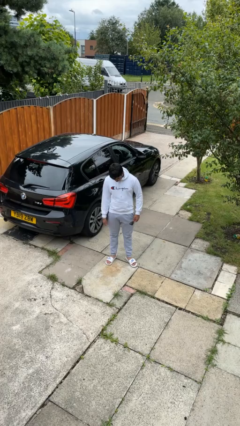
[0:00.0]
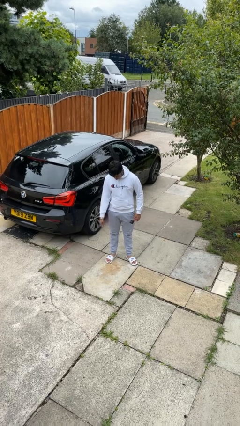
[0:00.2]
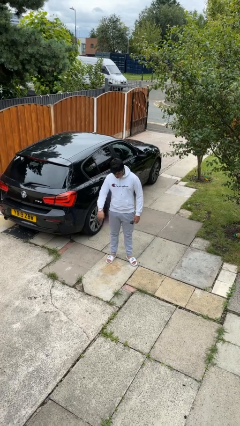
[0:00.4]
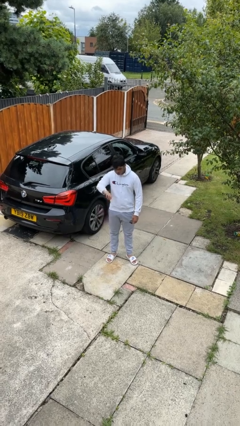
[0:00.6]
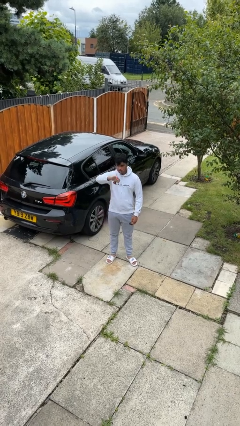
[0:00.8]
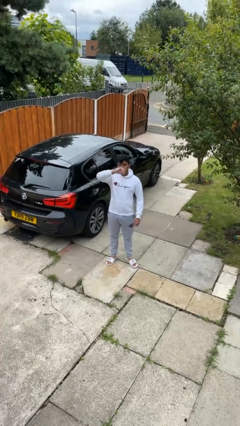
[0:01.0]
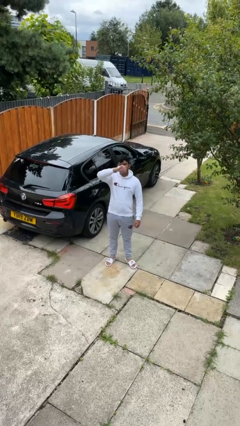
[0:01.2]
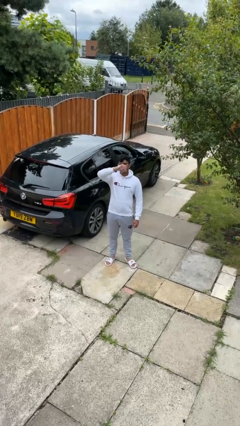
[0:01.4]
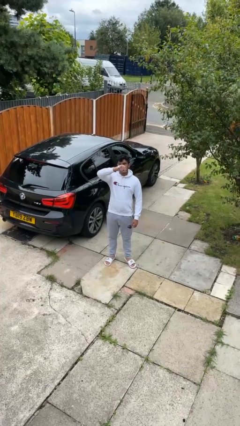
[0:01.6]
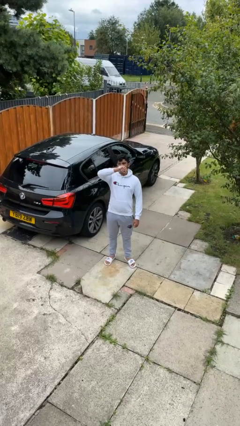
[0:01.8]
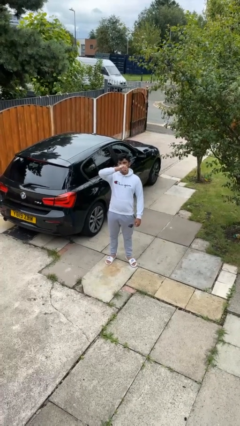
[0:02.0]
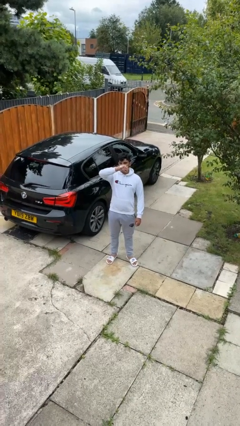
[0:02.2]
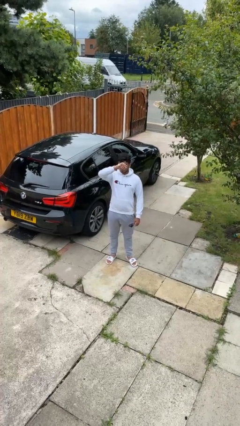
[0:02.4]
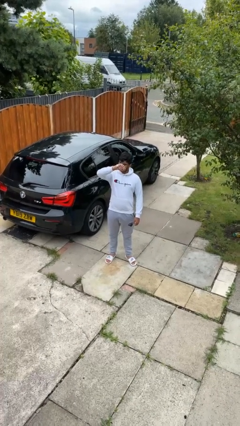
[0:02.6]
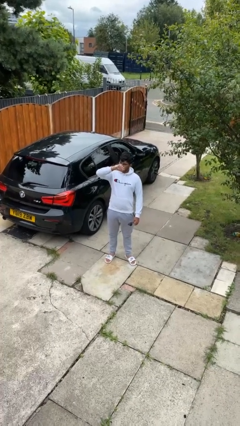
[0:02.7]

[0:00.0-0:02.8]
person looks at wristwatch

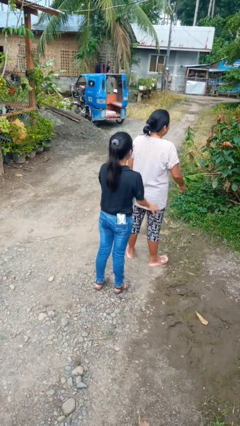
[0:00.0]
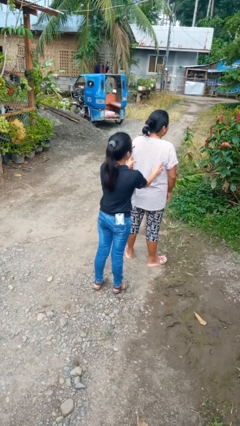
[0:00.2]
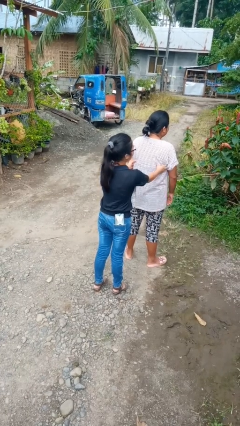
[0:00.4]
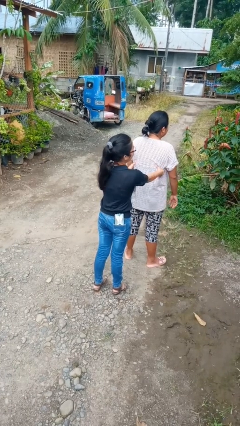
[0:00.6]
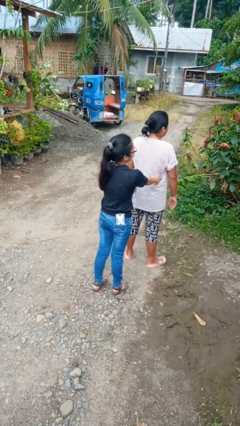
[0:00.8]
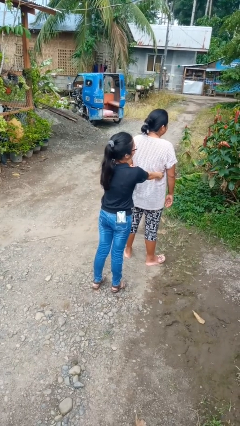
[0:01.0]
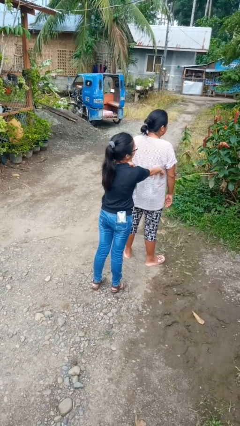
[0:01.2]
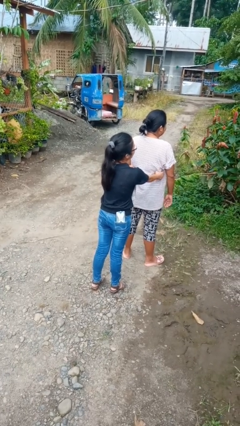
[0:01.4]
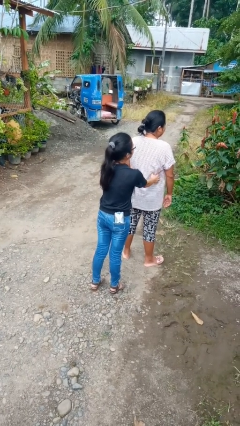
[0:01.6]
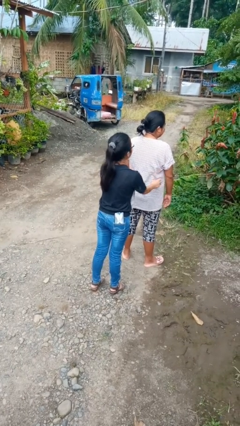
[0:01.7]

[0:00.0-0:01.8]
person tickles person

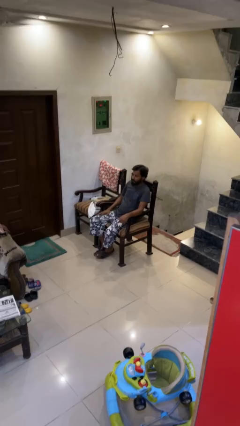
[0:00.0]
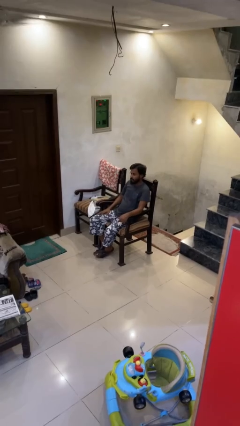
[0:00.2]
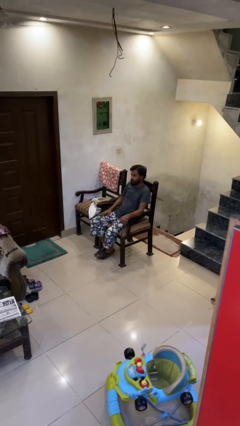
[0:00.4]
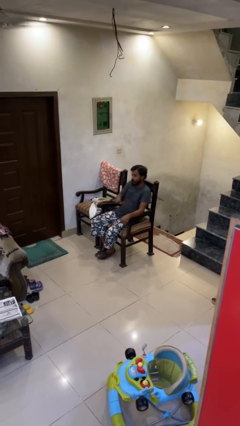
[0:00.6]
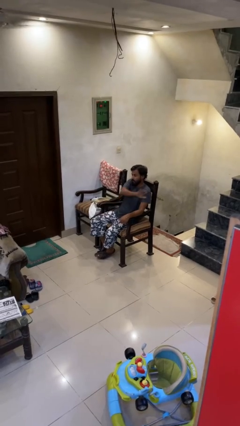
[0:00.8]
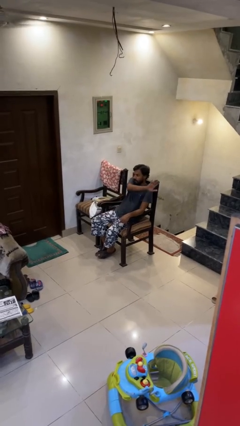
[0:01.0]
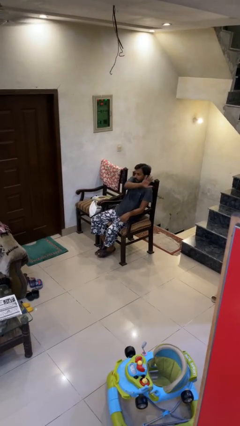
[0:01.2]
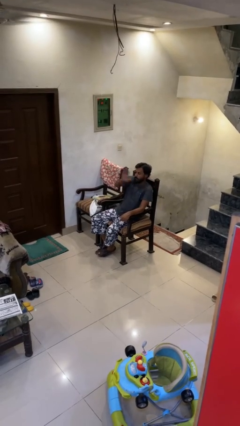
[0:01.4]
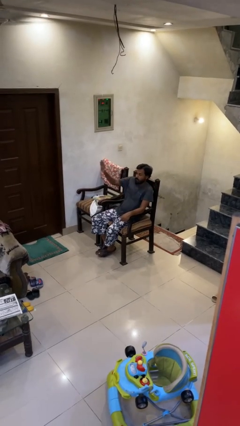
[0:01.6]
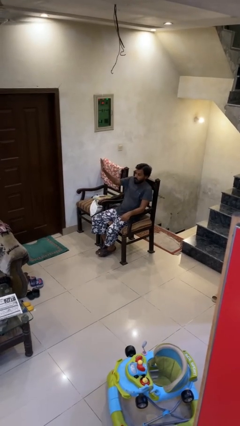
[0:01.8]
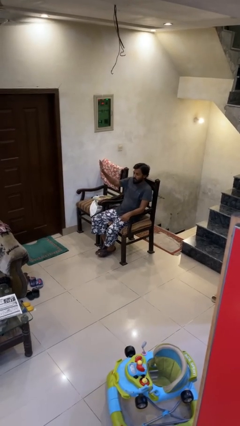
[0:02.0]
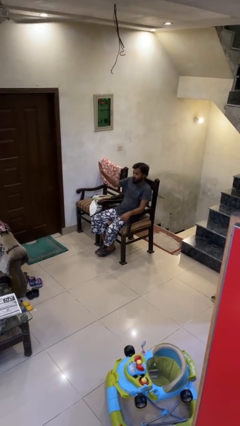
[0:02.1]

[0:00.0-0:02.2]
person gestures swipe right

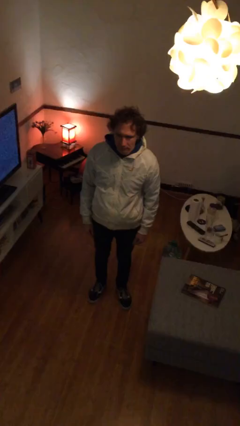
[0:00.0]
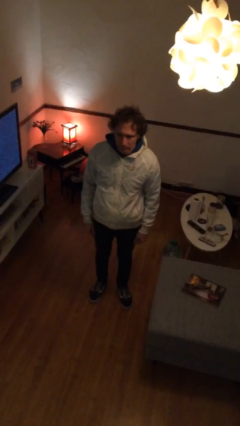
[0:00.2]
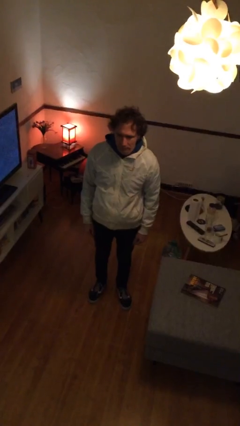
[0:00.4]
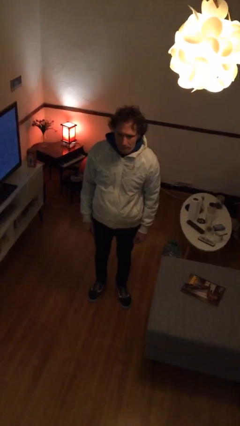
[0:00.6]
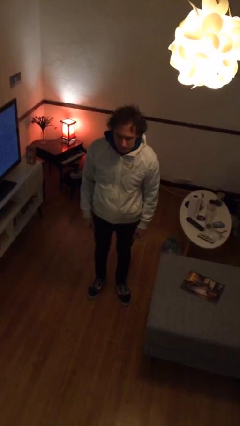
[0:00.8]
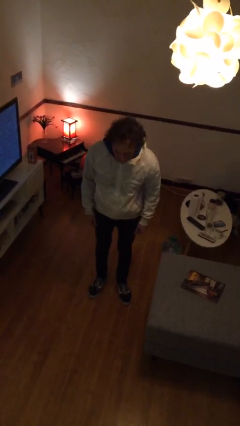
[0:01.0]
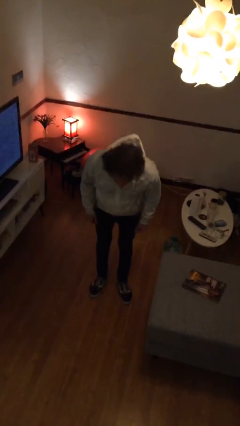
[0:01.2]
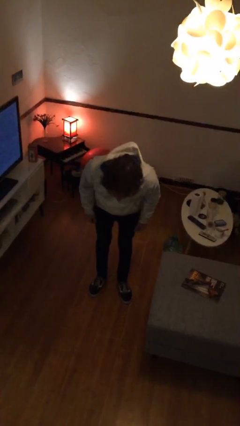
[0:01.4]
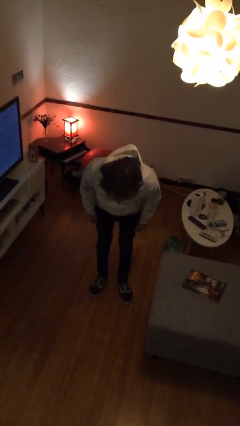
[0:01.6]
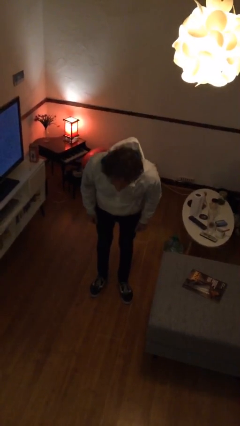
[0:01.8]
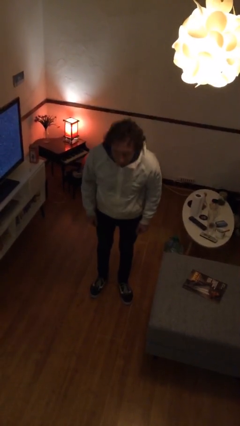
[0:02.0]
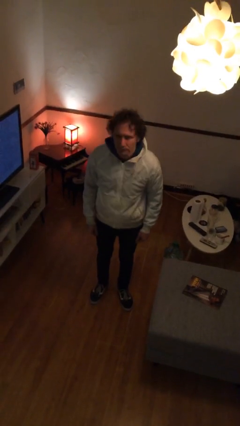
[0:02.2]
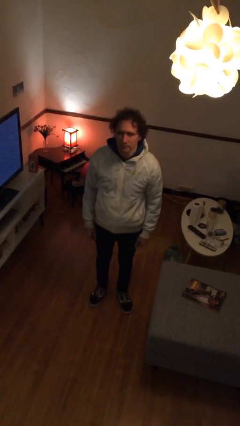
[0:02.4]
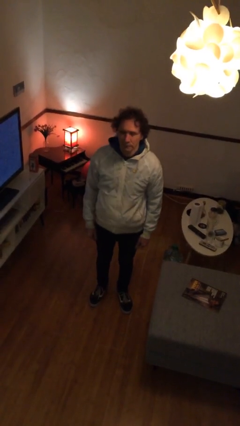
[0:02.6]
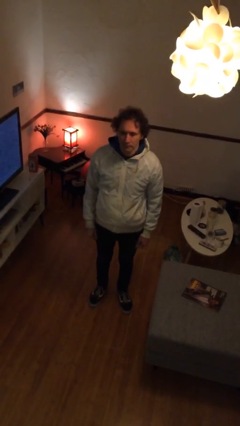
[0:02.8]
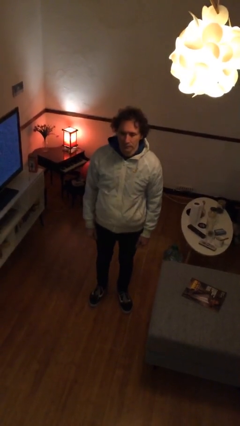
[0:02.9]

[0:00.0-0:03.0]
person bows

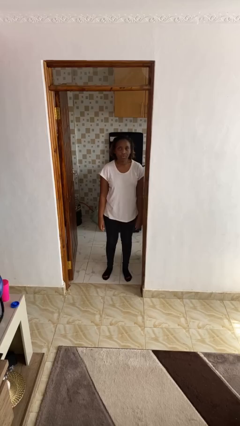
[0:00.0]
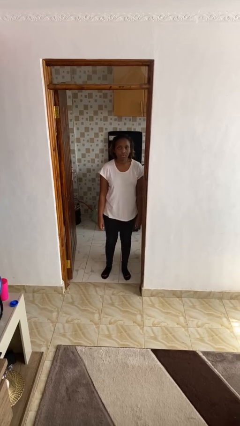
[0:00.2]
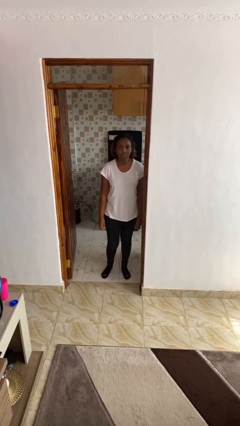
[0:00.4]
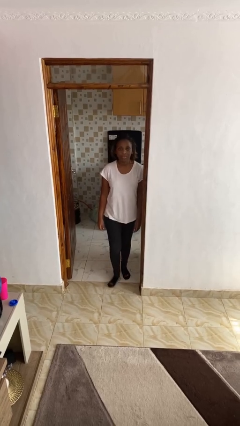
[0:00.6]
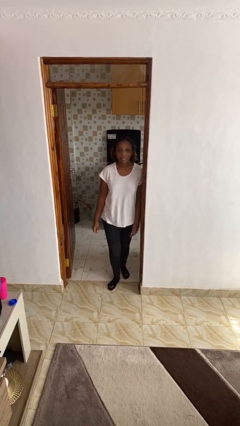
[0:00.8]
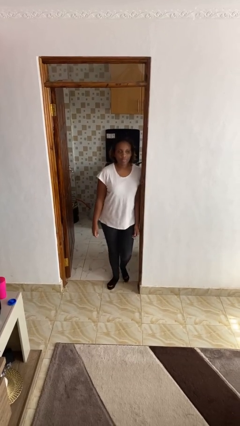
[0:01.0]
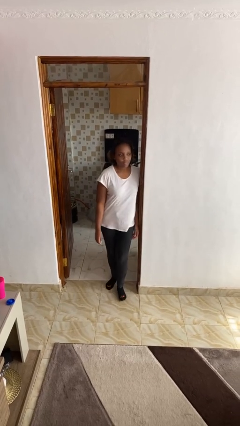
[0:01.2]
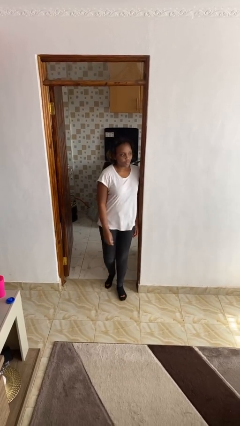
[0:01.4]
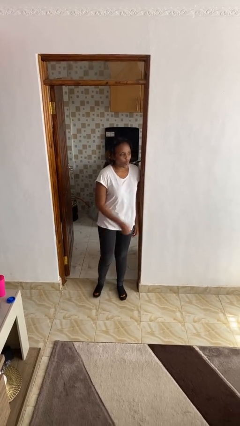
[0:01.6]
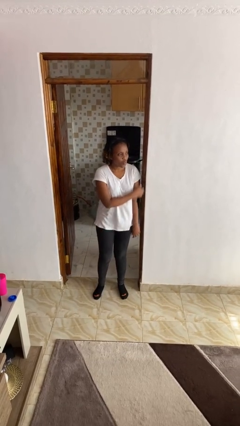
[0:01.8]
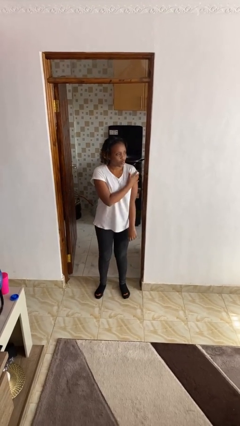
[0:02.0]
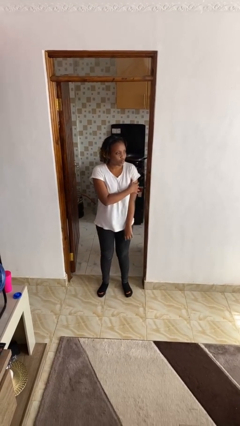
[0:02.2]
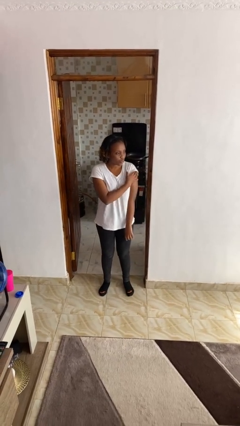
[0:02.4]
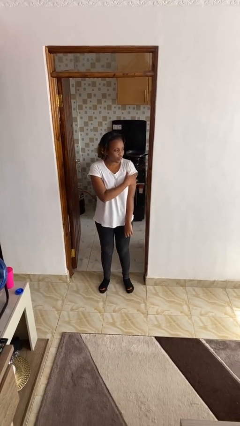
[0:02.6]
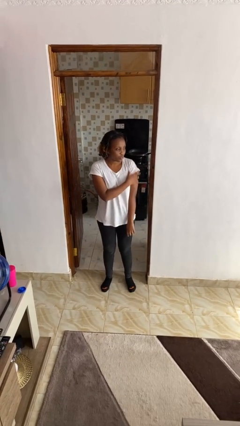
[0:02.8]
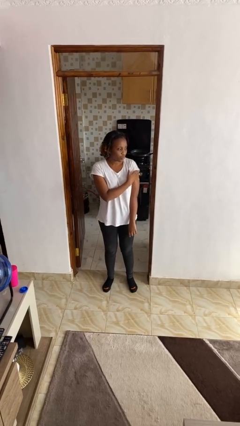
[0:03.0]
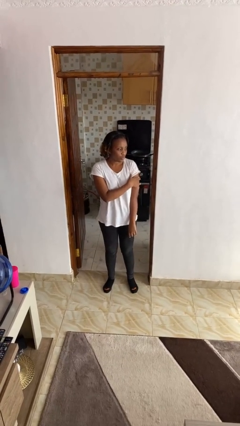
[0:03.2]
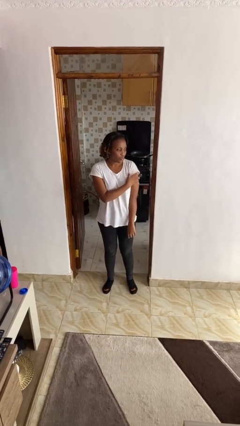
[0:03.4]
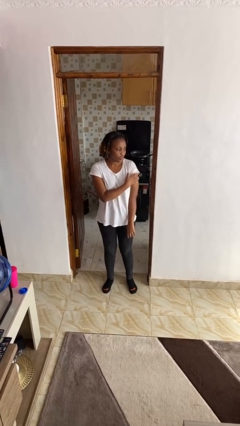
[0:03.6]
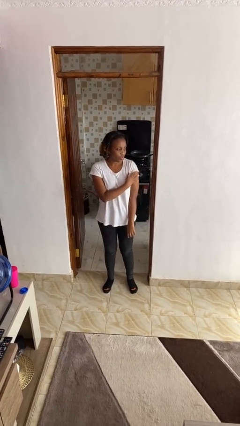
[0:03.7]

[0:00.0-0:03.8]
person bumps into wall

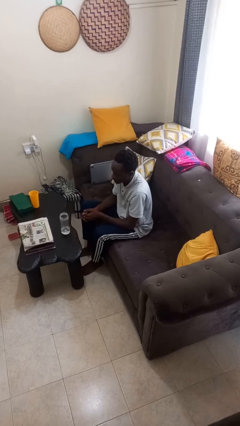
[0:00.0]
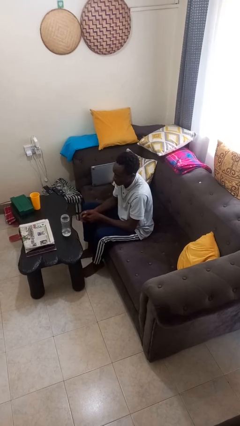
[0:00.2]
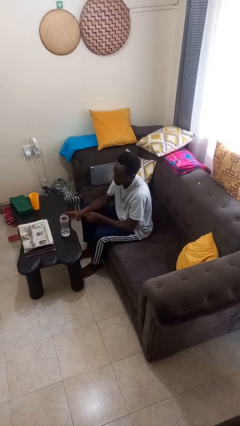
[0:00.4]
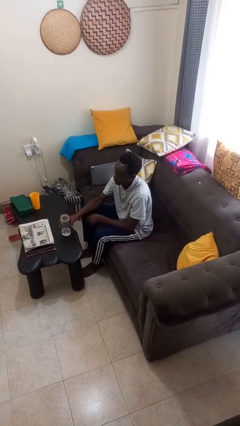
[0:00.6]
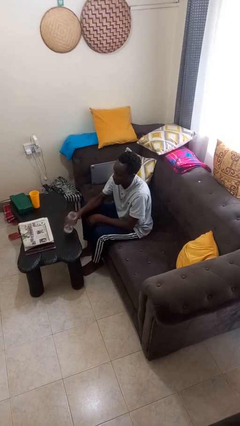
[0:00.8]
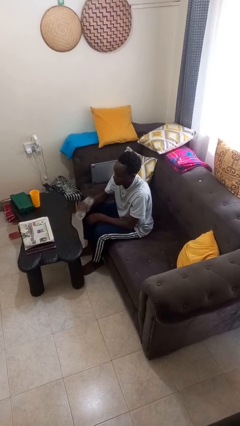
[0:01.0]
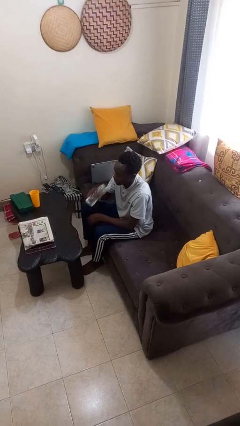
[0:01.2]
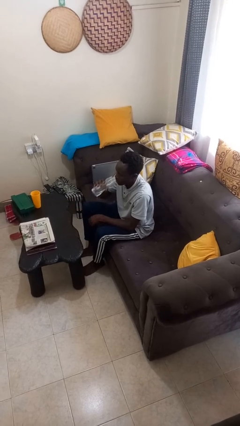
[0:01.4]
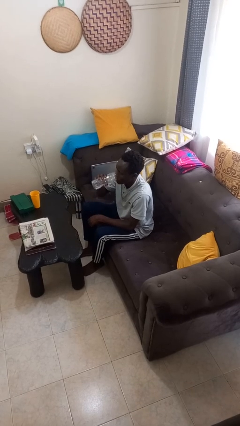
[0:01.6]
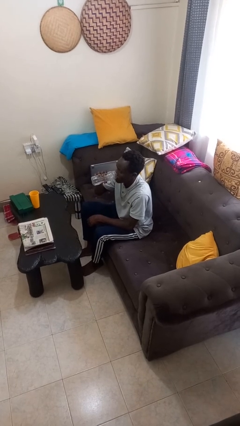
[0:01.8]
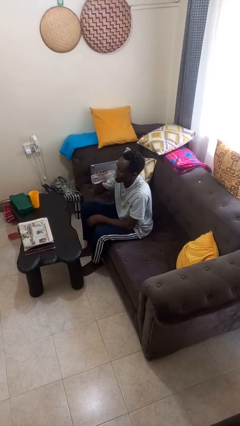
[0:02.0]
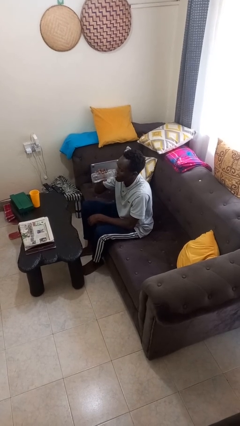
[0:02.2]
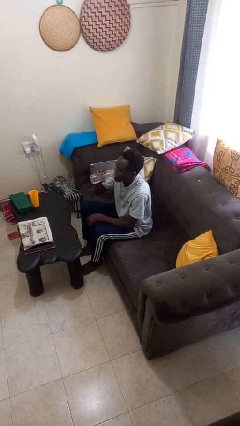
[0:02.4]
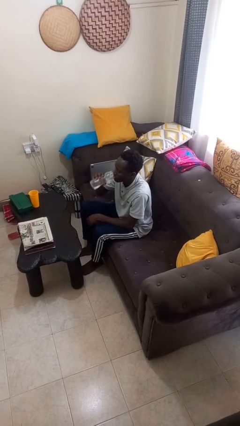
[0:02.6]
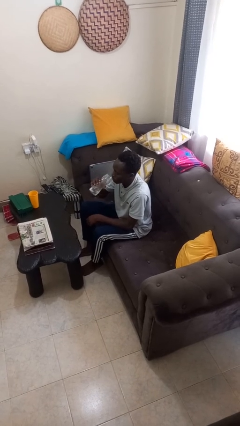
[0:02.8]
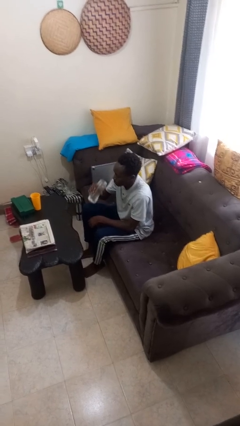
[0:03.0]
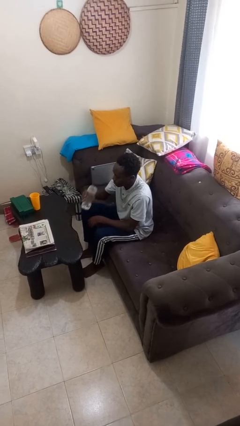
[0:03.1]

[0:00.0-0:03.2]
person drinks from bottle

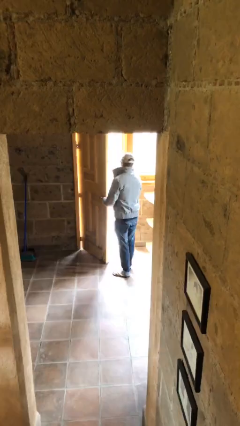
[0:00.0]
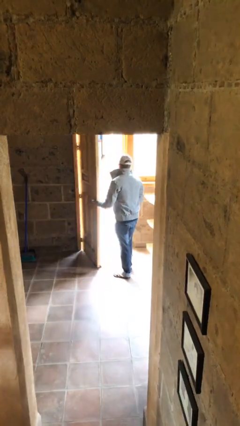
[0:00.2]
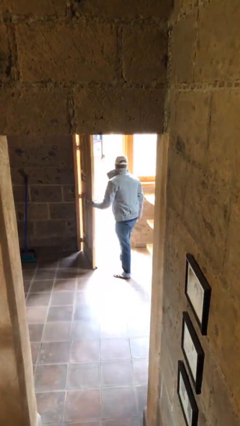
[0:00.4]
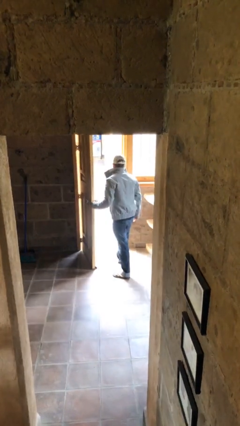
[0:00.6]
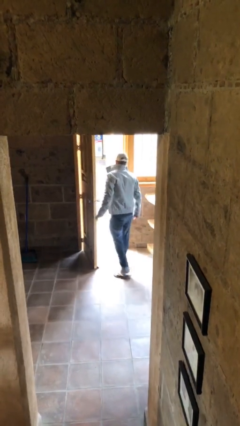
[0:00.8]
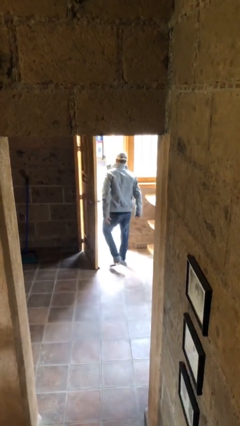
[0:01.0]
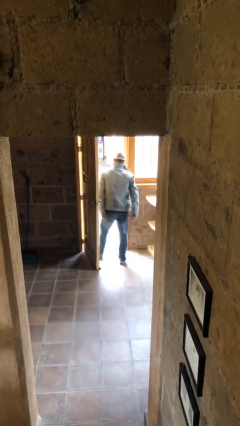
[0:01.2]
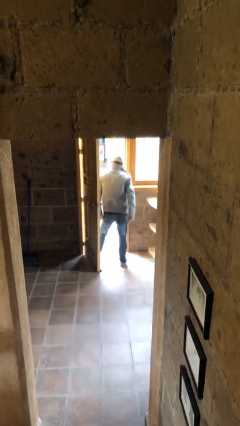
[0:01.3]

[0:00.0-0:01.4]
person exits scene through structure
